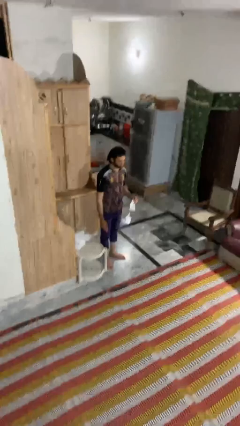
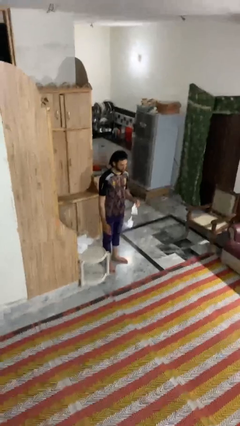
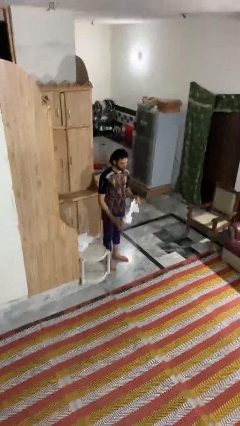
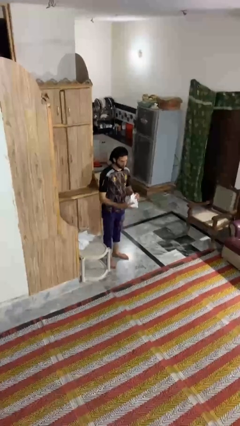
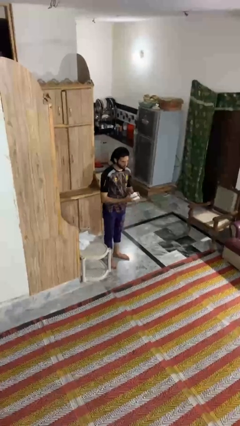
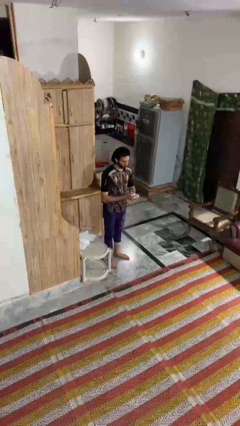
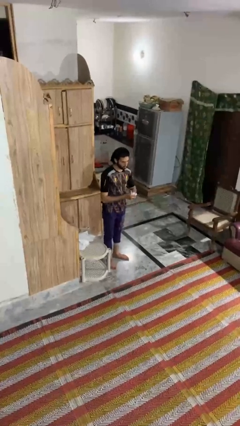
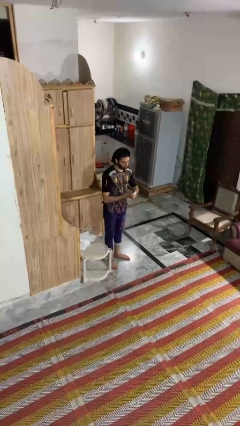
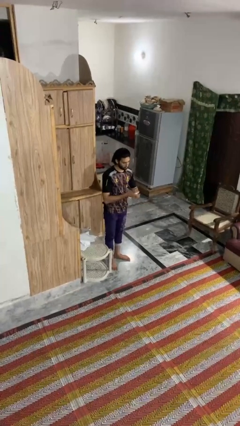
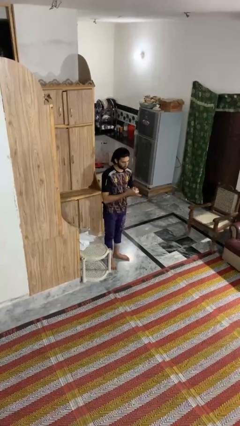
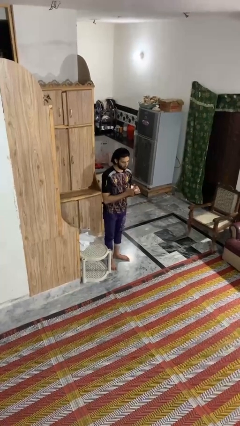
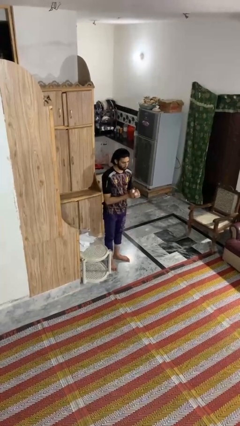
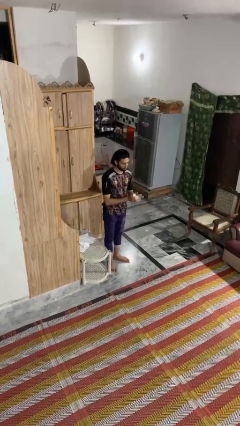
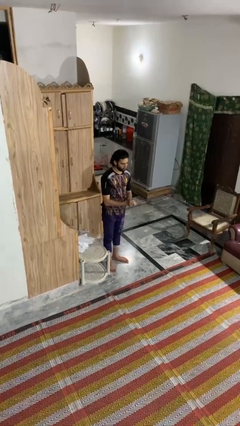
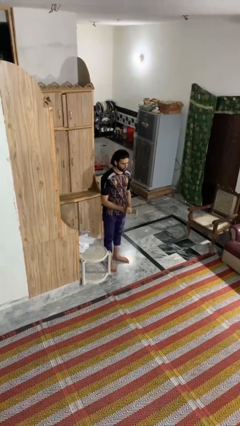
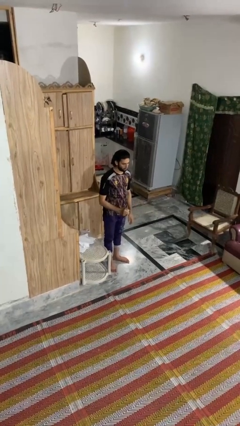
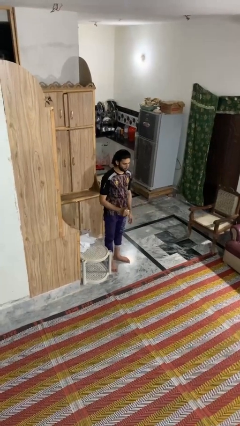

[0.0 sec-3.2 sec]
person crumples paper

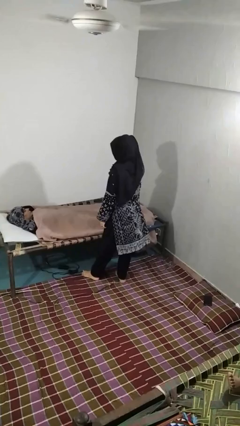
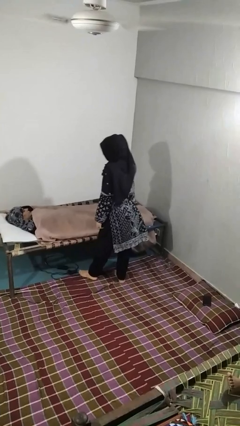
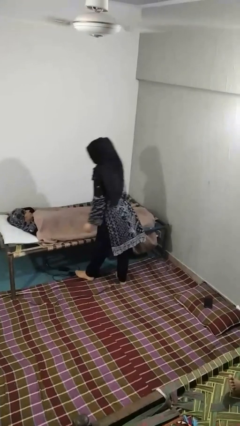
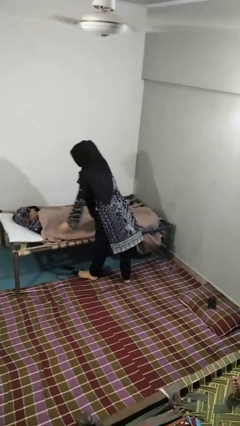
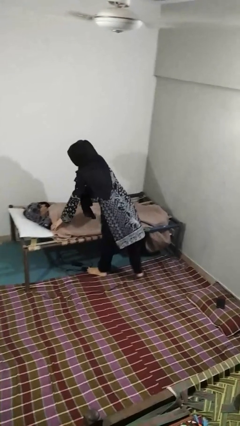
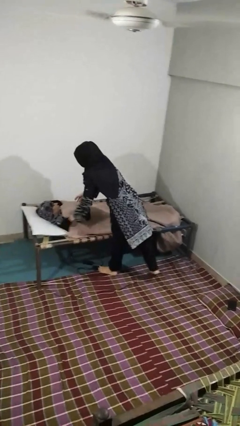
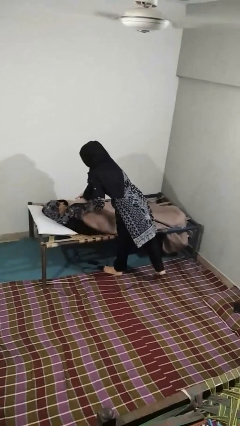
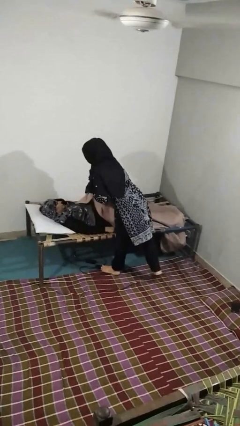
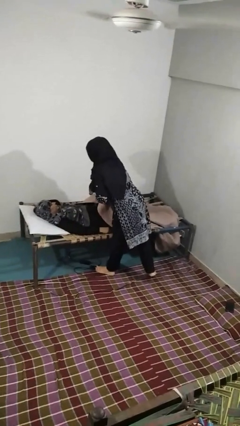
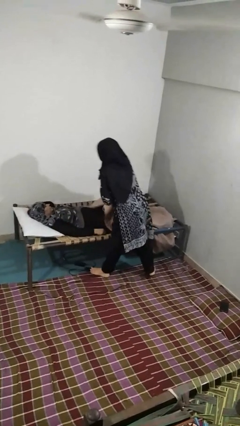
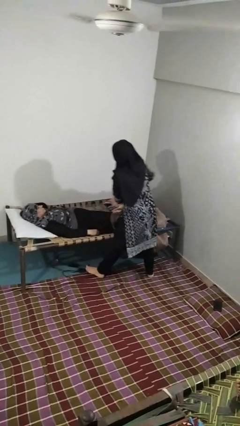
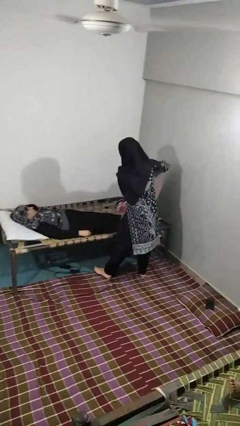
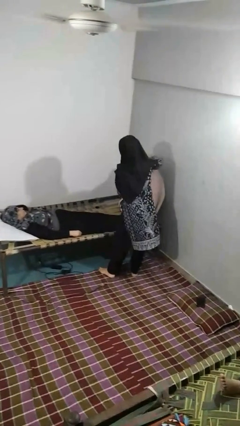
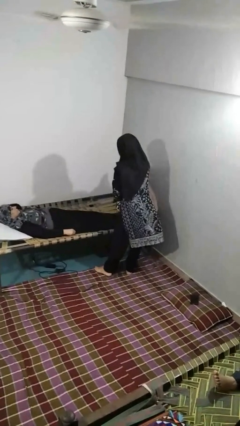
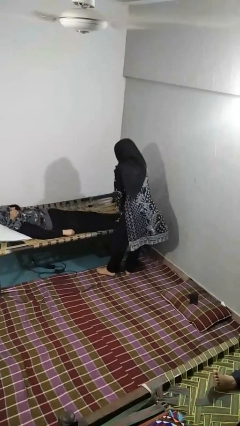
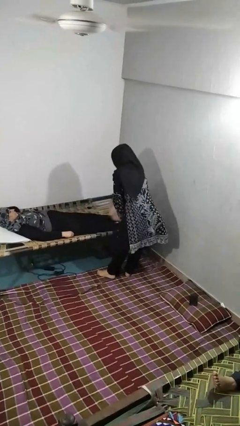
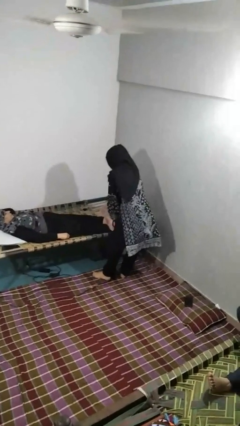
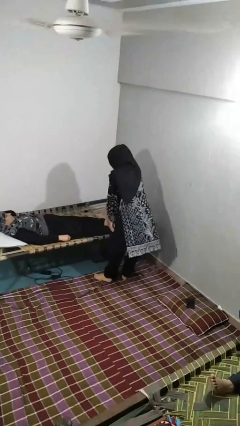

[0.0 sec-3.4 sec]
person uncovers friend with blanket

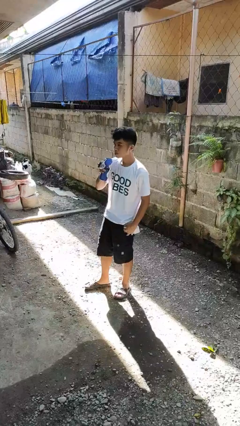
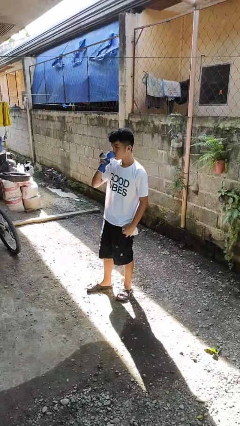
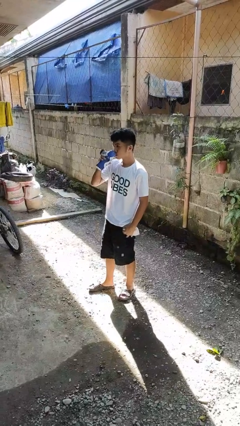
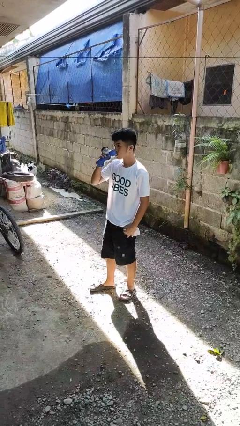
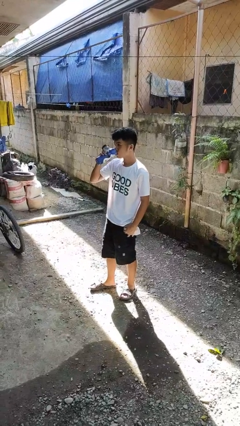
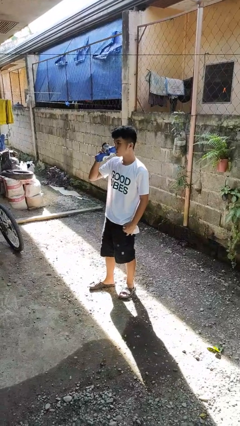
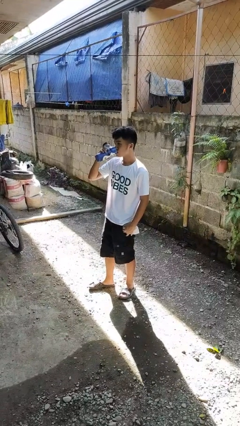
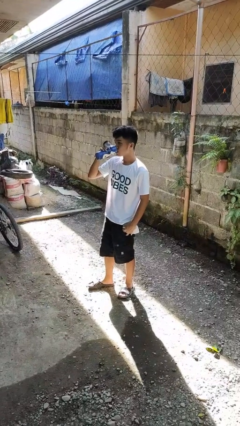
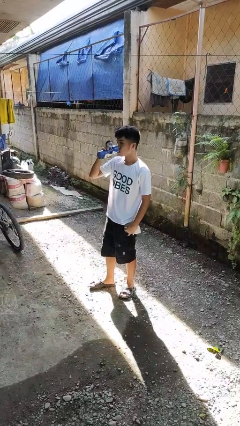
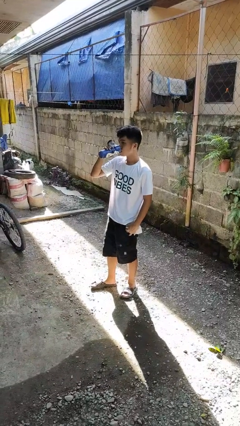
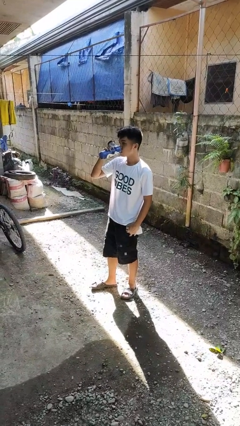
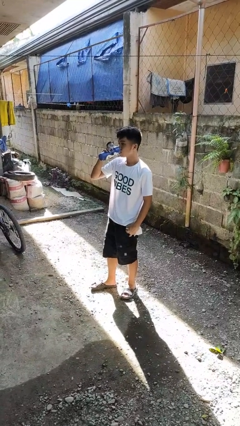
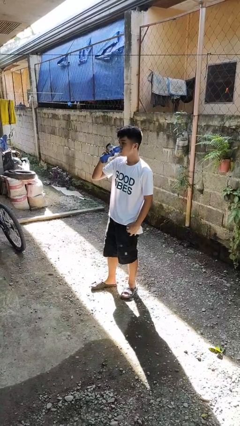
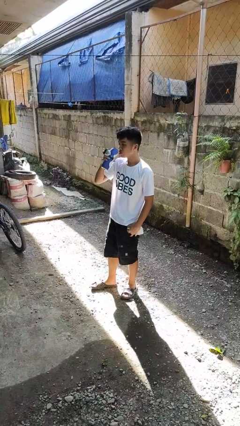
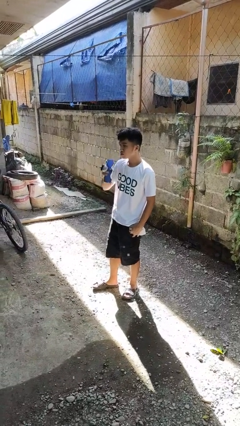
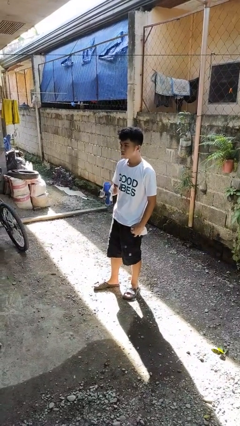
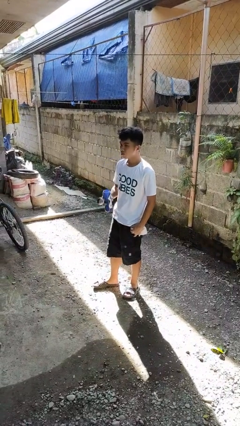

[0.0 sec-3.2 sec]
person drinks from bottle

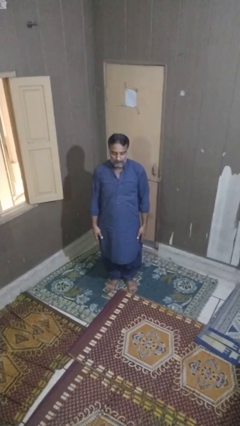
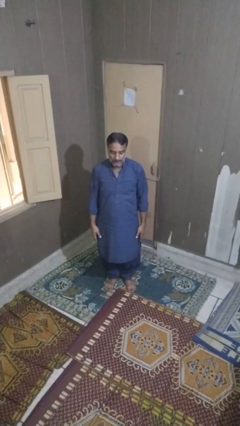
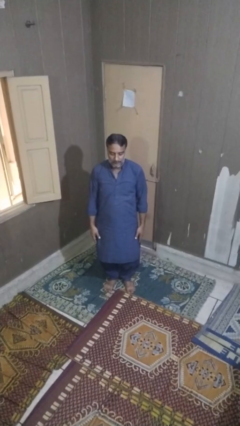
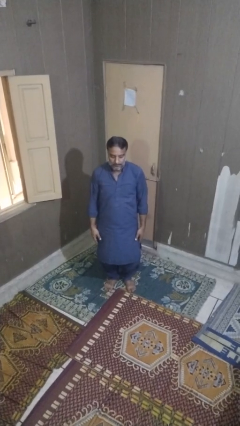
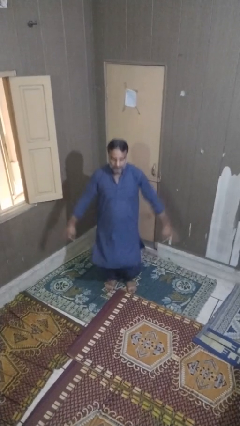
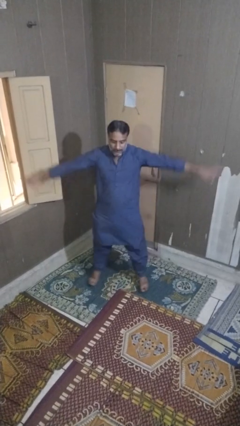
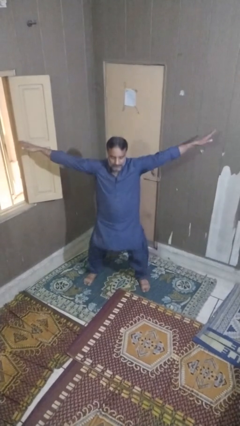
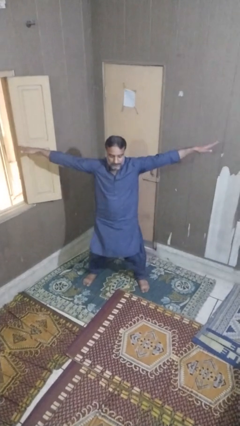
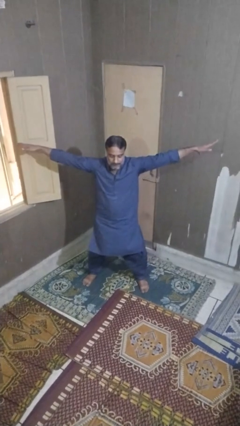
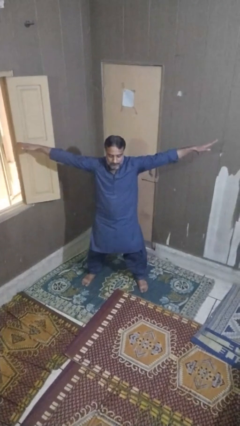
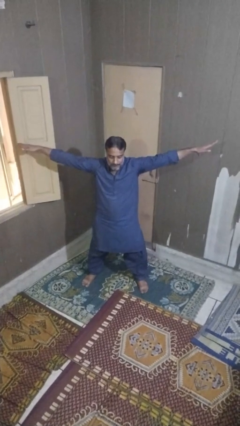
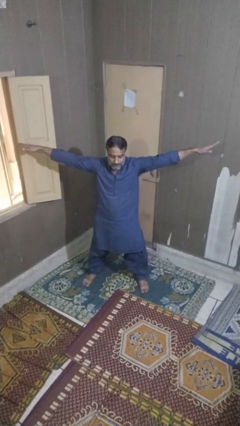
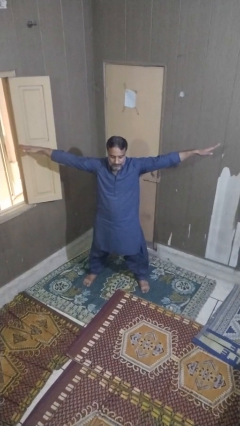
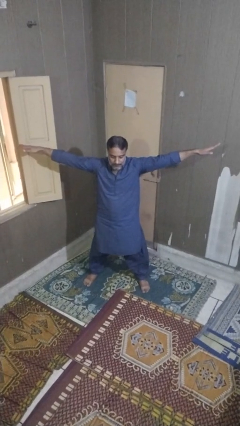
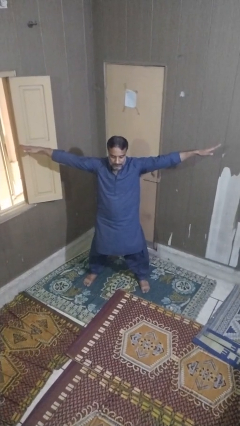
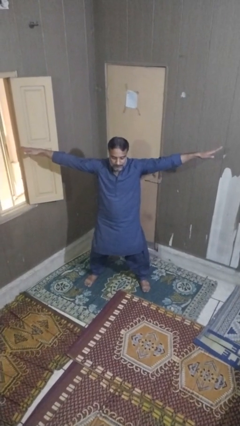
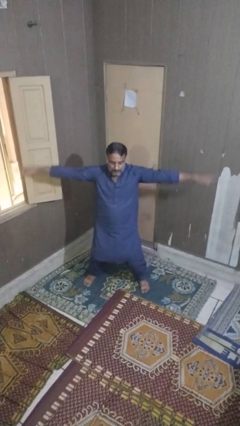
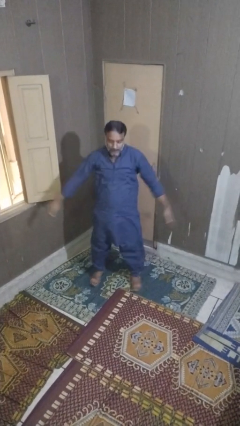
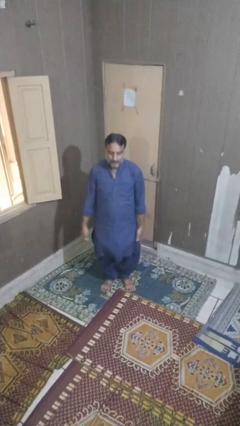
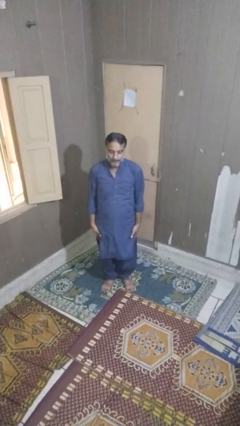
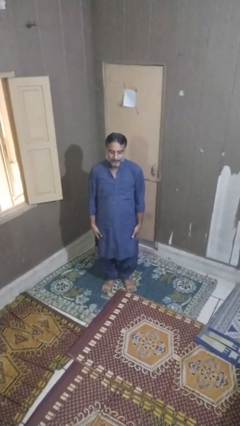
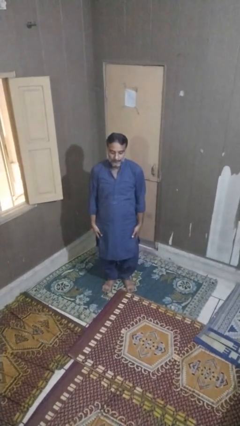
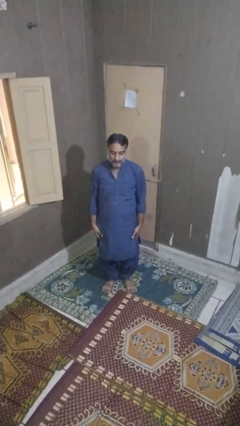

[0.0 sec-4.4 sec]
person exercises with jumping jacks

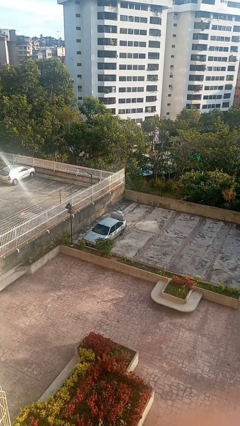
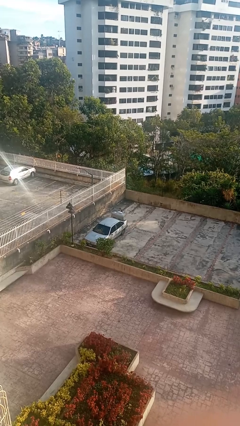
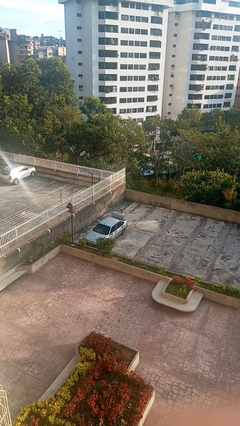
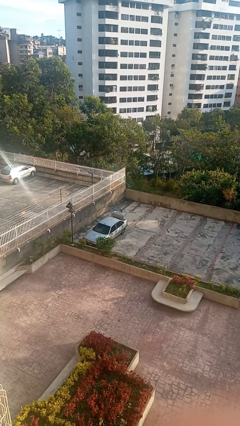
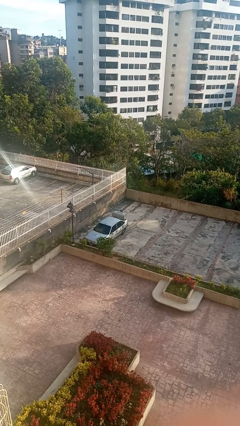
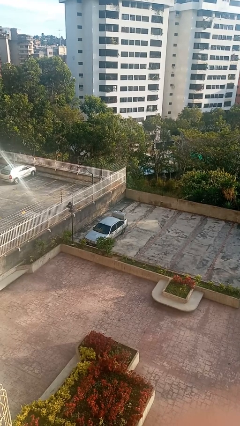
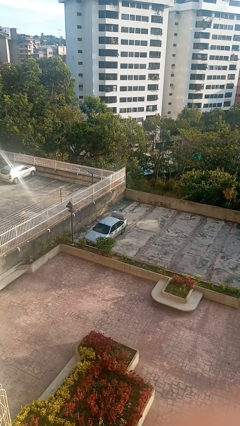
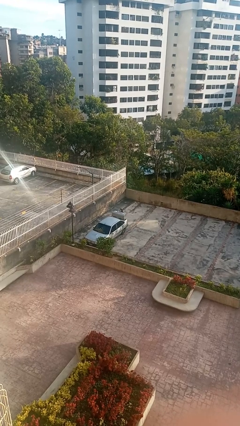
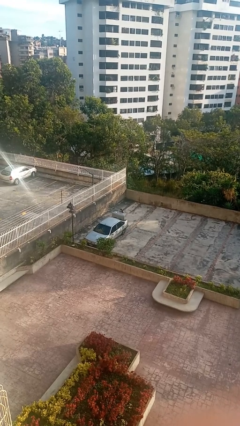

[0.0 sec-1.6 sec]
person loads car

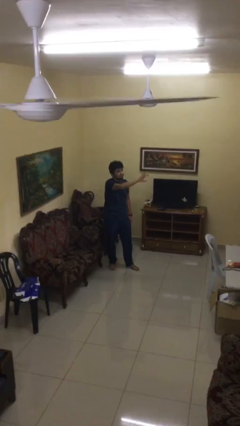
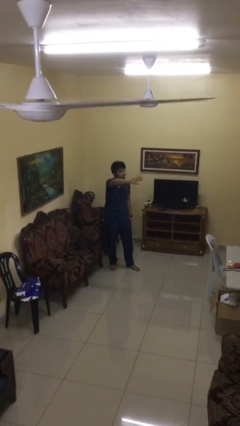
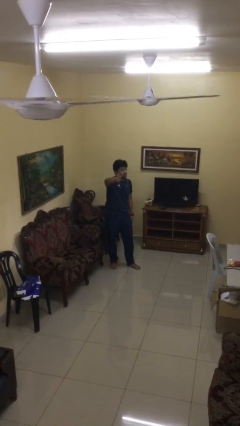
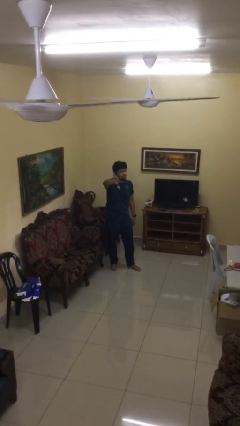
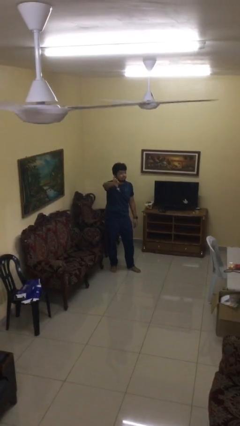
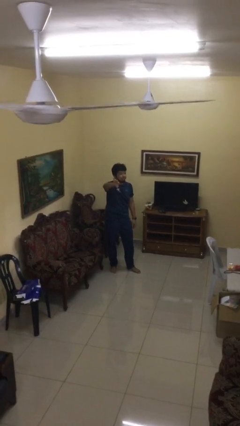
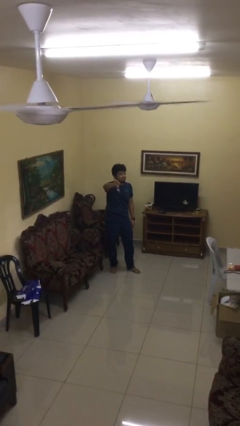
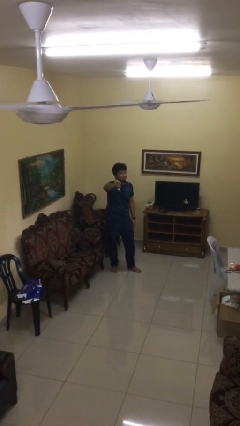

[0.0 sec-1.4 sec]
person gestures swipe right
